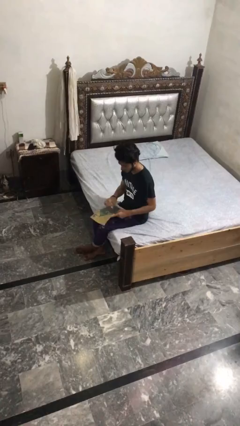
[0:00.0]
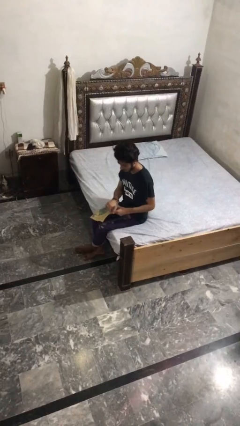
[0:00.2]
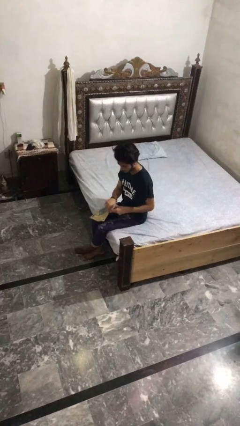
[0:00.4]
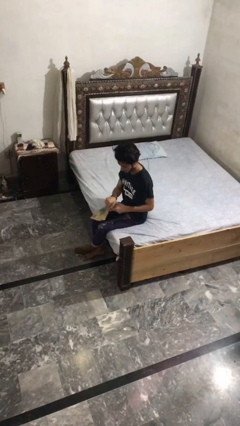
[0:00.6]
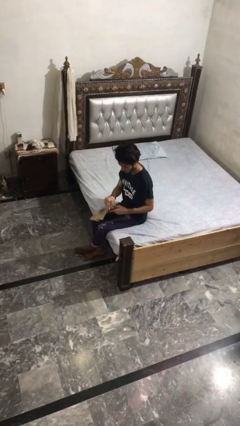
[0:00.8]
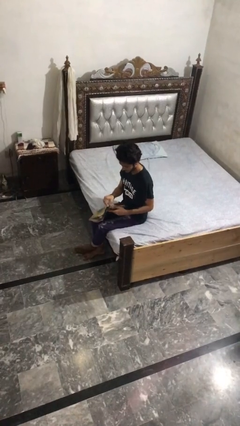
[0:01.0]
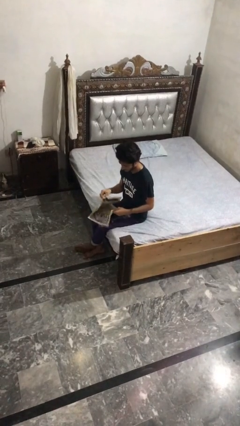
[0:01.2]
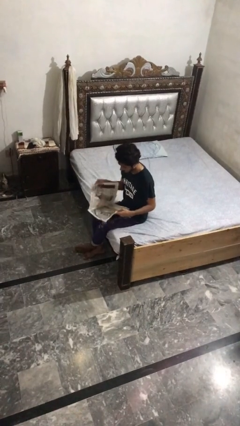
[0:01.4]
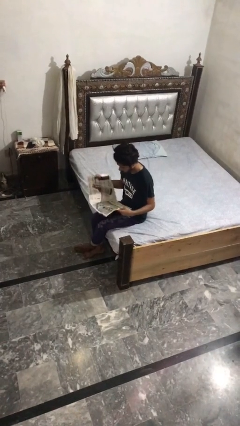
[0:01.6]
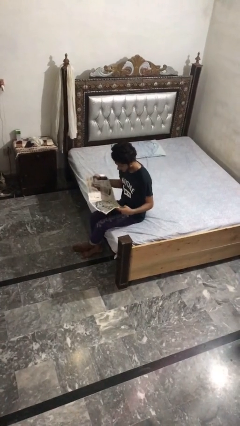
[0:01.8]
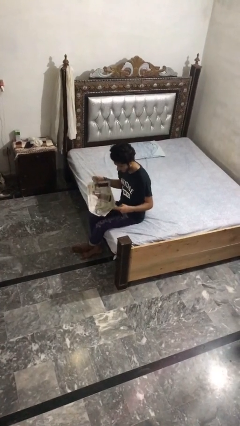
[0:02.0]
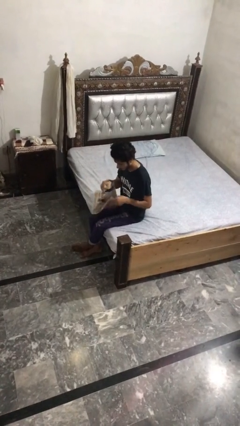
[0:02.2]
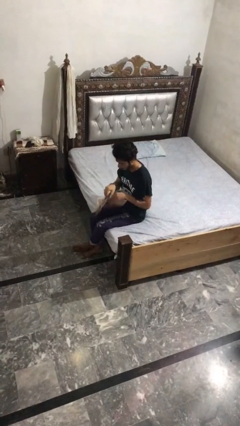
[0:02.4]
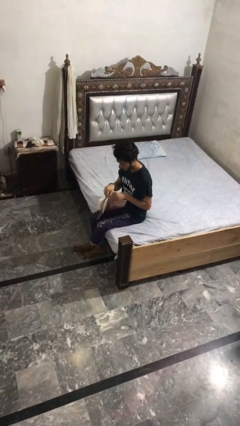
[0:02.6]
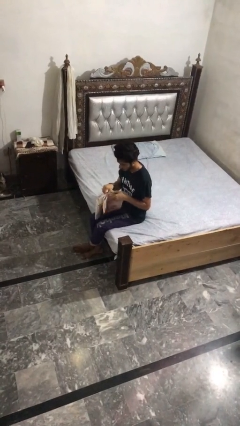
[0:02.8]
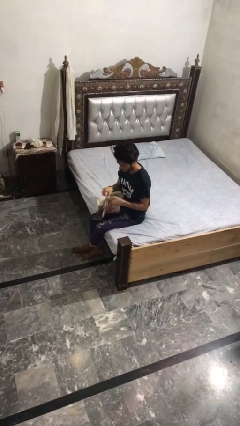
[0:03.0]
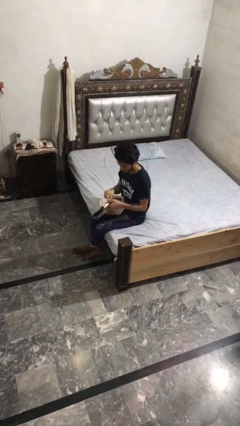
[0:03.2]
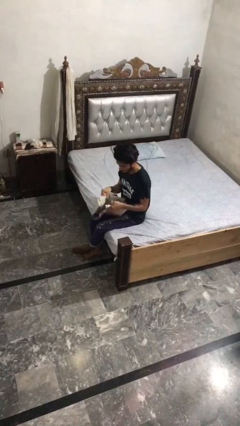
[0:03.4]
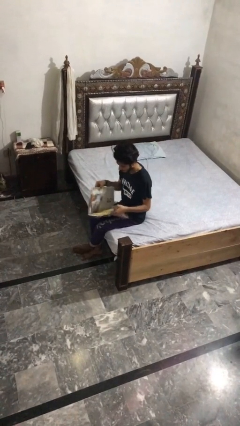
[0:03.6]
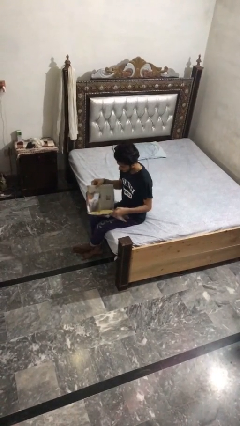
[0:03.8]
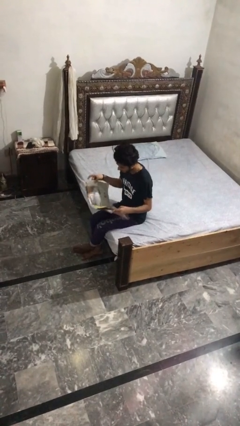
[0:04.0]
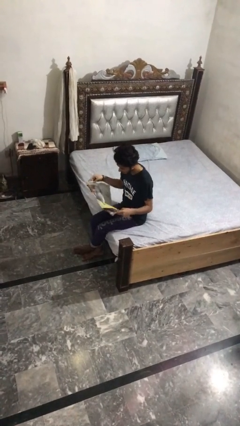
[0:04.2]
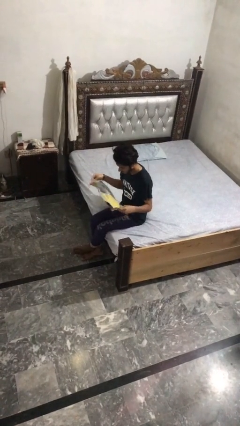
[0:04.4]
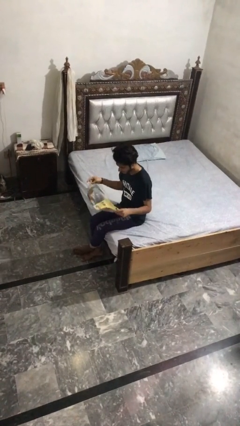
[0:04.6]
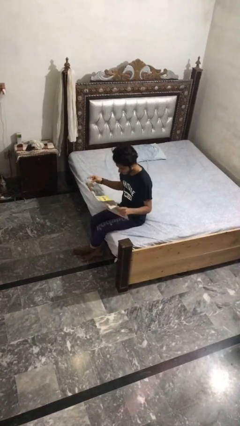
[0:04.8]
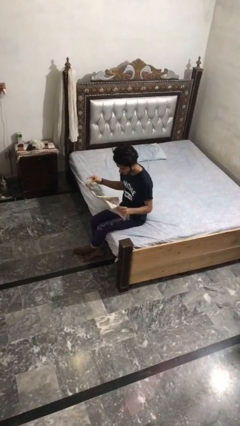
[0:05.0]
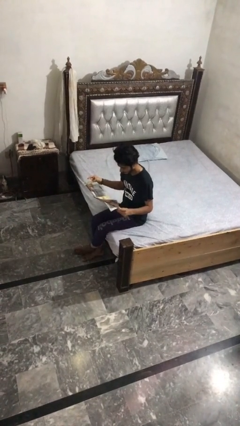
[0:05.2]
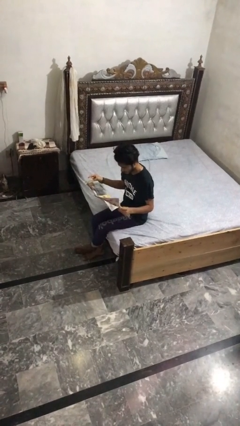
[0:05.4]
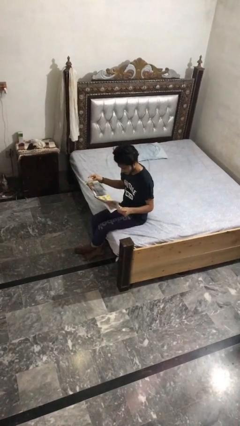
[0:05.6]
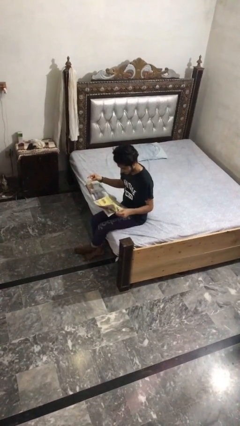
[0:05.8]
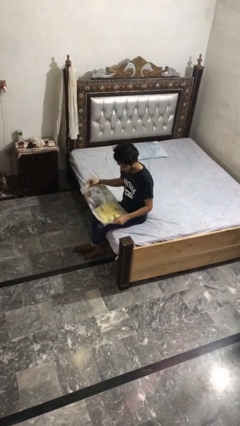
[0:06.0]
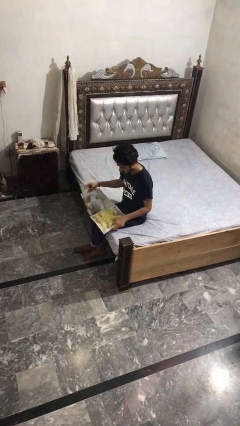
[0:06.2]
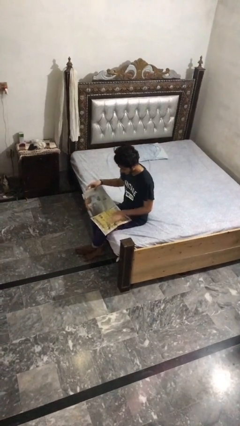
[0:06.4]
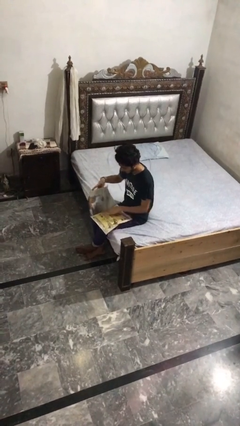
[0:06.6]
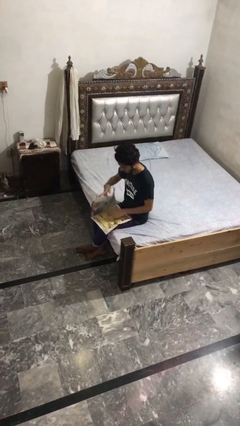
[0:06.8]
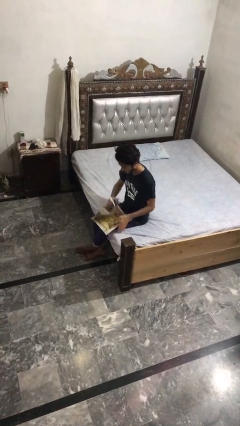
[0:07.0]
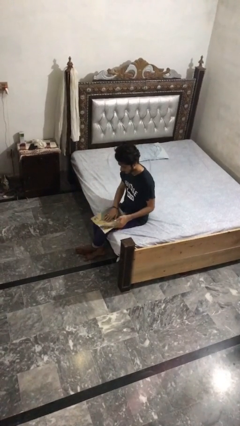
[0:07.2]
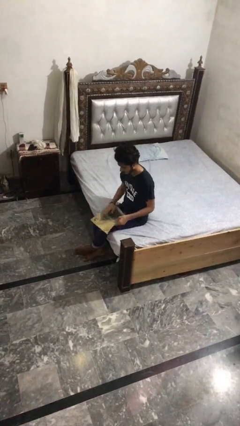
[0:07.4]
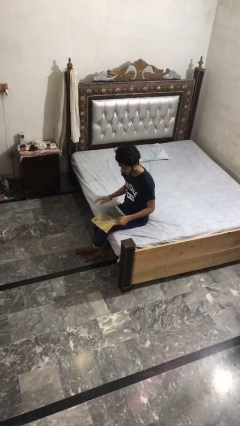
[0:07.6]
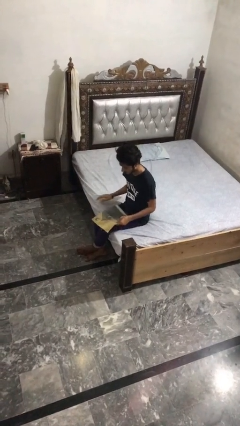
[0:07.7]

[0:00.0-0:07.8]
person reads magazine

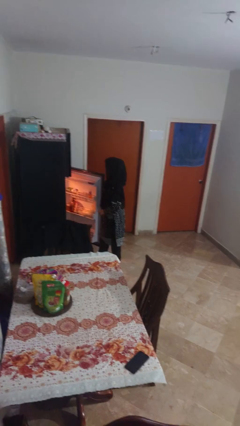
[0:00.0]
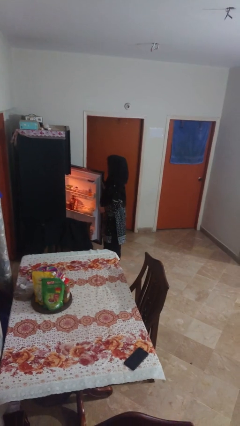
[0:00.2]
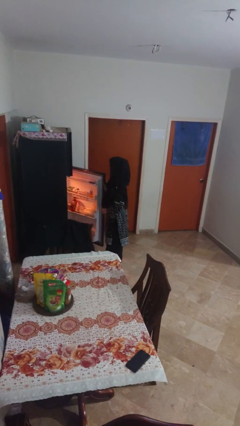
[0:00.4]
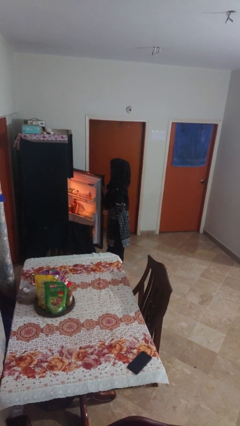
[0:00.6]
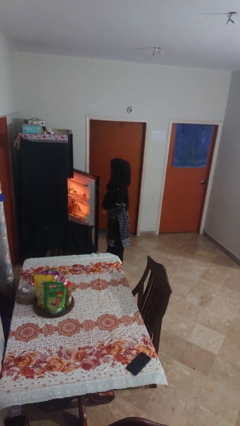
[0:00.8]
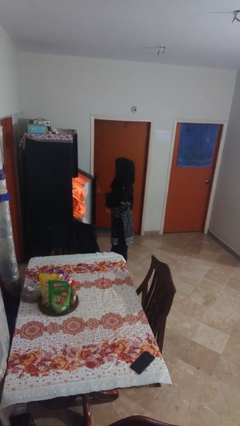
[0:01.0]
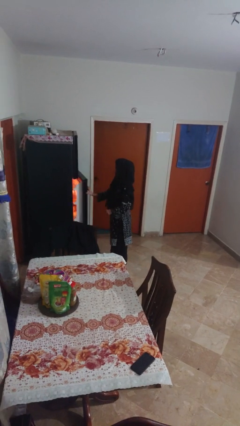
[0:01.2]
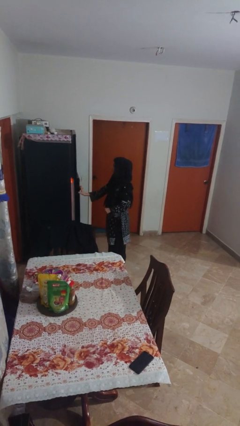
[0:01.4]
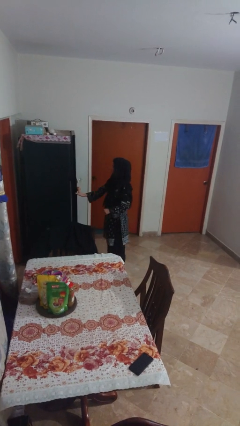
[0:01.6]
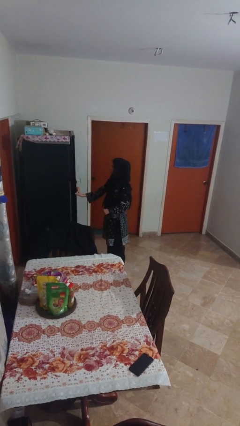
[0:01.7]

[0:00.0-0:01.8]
person closes refrigerator

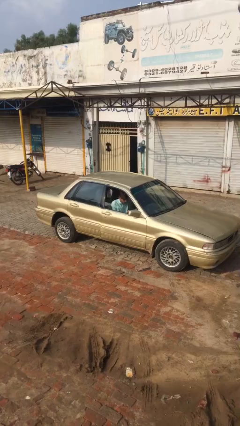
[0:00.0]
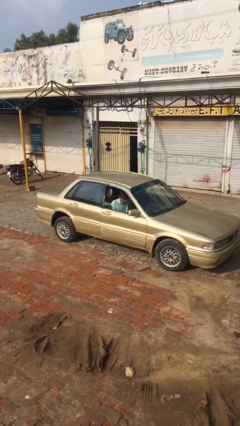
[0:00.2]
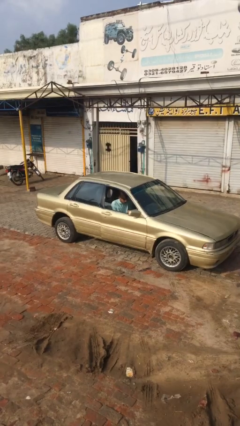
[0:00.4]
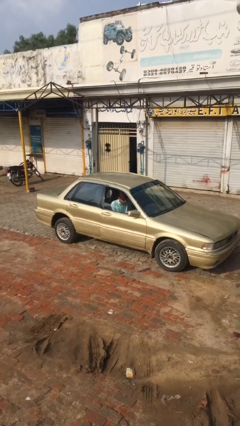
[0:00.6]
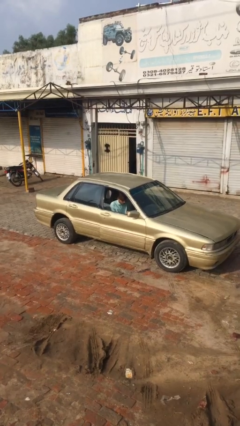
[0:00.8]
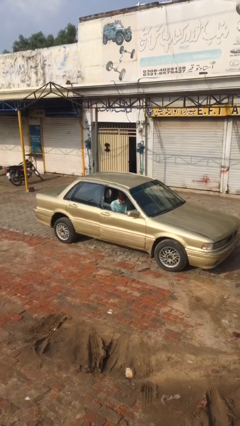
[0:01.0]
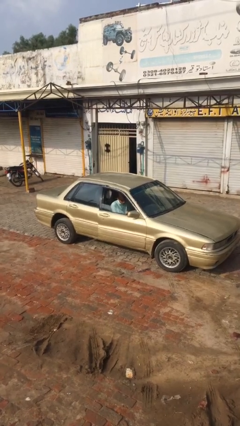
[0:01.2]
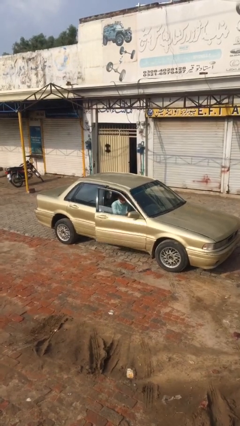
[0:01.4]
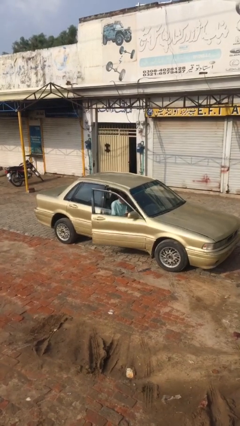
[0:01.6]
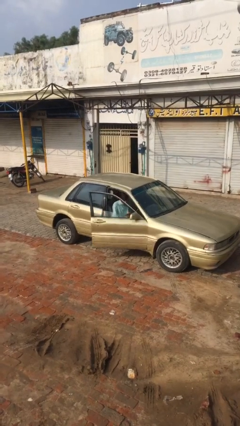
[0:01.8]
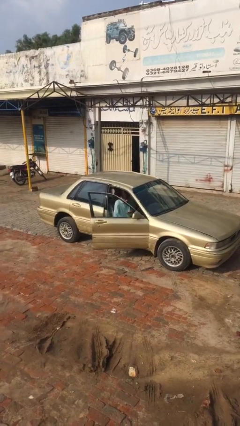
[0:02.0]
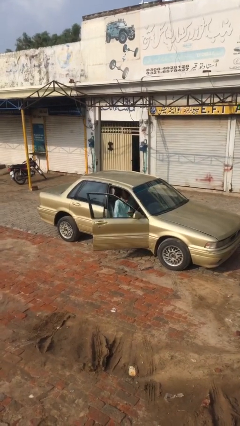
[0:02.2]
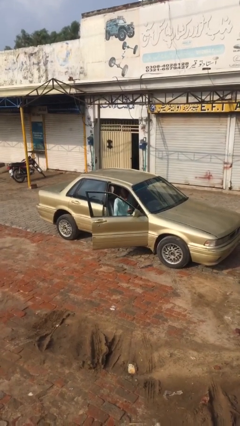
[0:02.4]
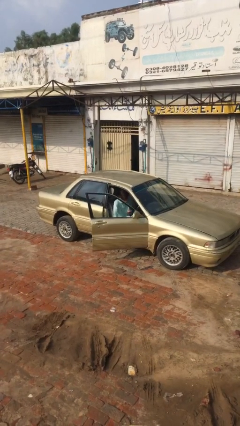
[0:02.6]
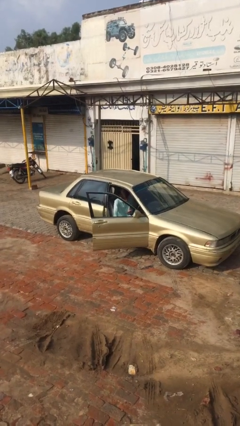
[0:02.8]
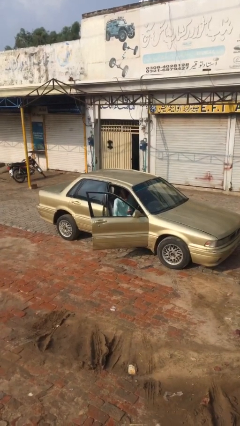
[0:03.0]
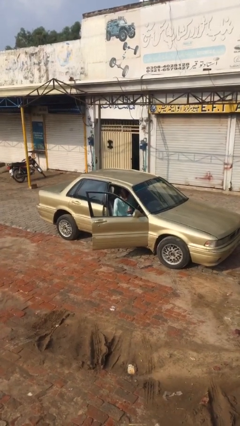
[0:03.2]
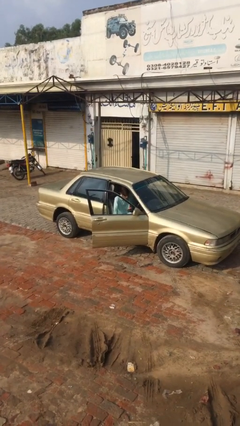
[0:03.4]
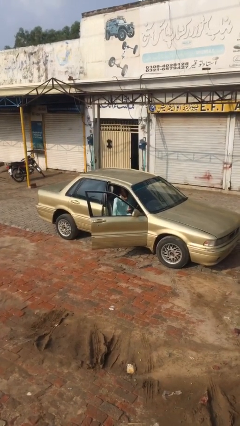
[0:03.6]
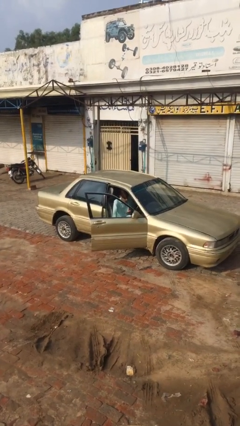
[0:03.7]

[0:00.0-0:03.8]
person opens car door

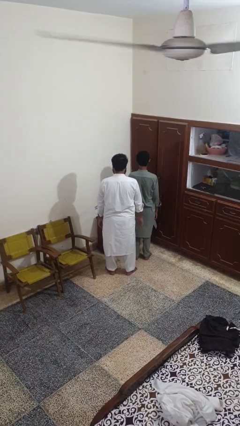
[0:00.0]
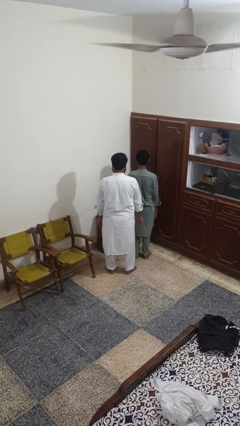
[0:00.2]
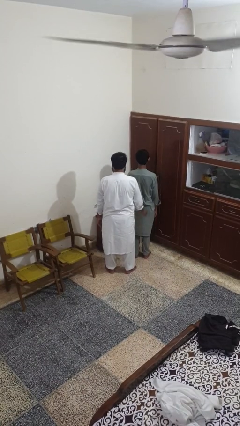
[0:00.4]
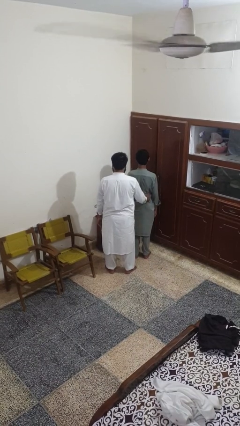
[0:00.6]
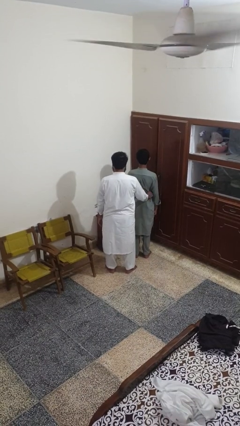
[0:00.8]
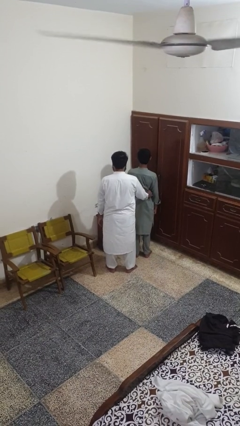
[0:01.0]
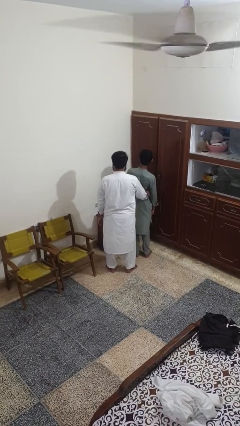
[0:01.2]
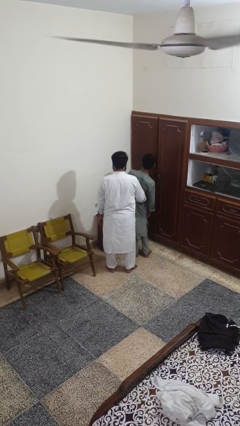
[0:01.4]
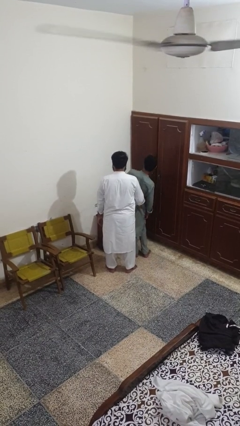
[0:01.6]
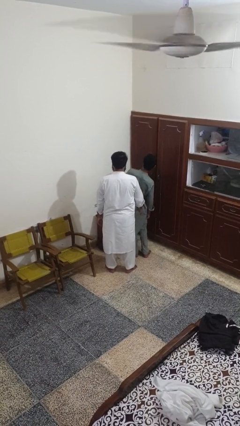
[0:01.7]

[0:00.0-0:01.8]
person tickles person

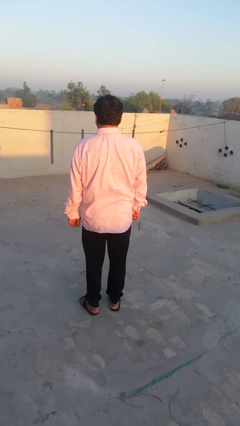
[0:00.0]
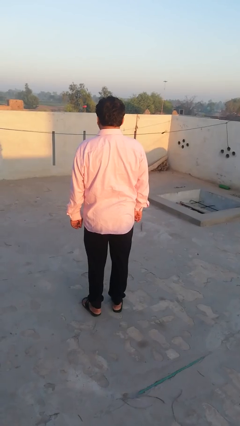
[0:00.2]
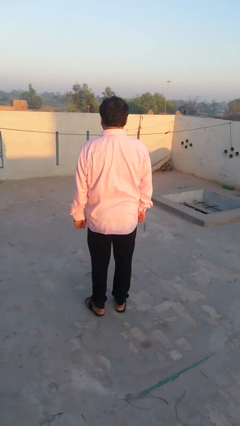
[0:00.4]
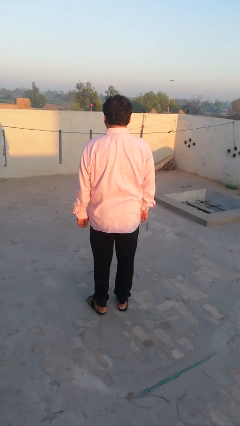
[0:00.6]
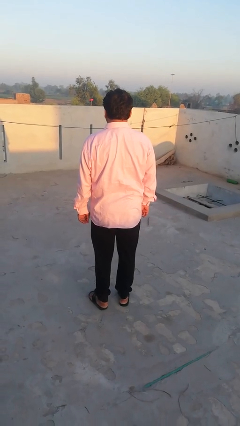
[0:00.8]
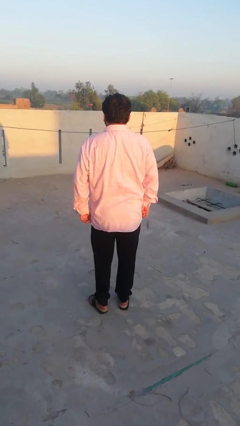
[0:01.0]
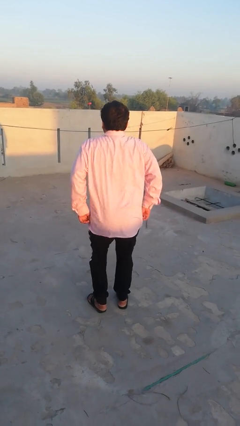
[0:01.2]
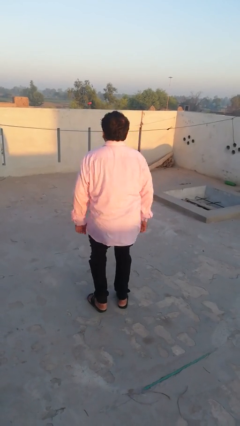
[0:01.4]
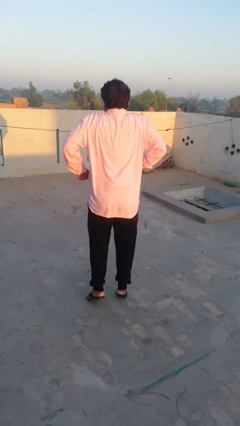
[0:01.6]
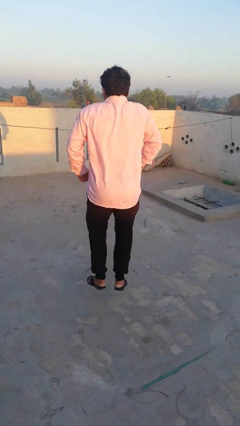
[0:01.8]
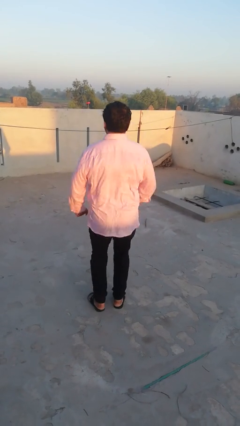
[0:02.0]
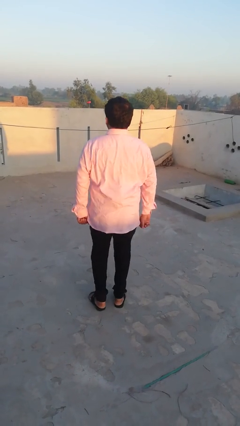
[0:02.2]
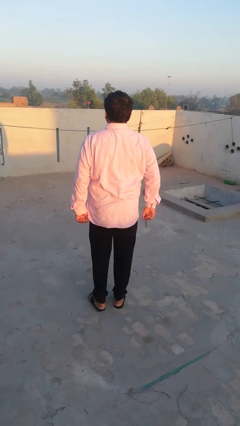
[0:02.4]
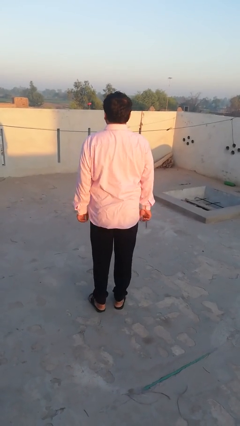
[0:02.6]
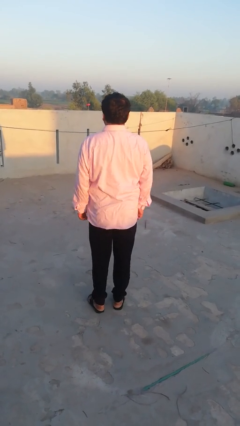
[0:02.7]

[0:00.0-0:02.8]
person jumps
